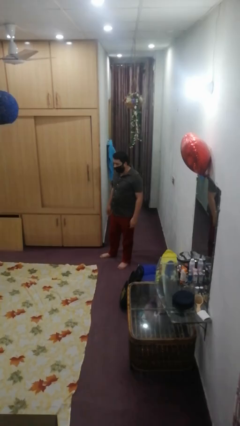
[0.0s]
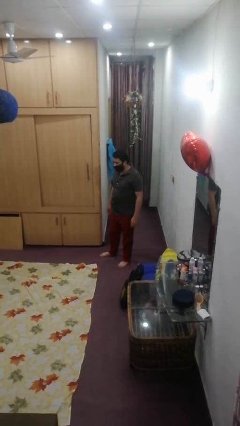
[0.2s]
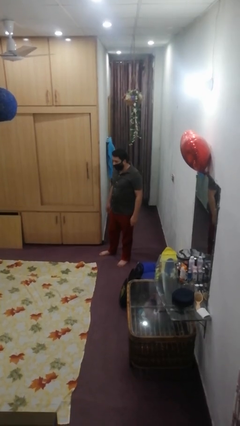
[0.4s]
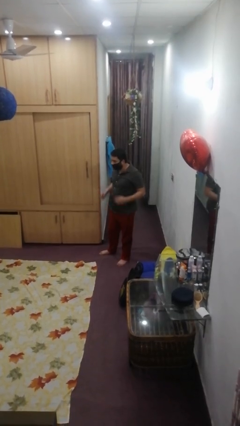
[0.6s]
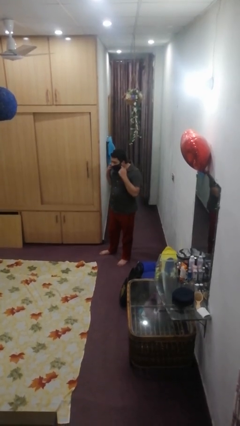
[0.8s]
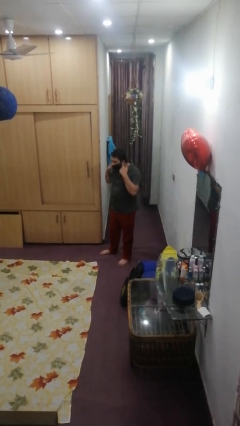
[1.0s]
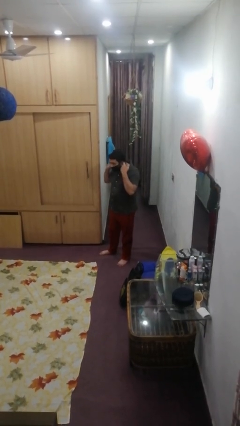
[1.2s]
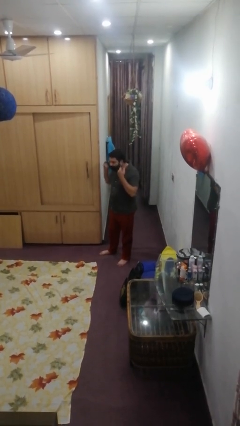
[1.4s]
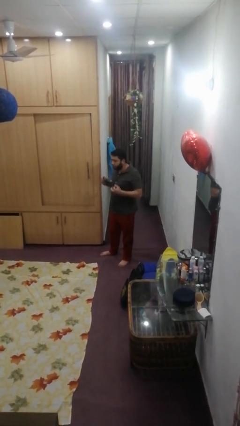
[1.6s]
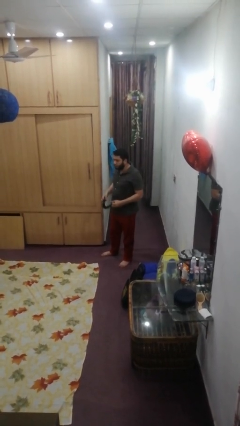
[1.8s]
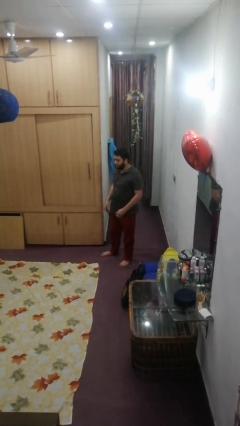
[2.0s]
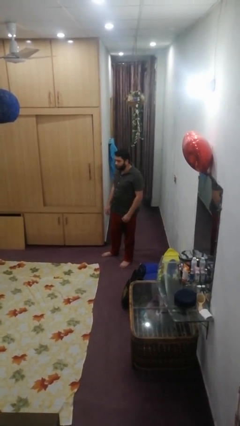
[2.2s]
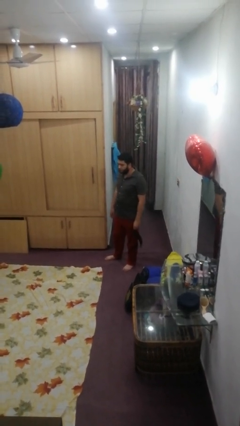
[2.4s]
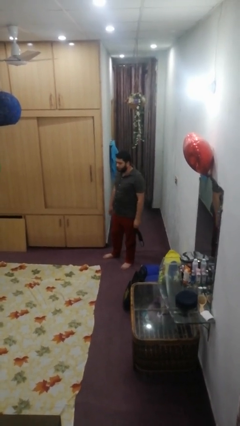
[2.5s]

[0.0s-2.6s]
person takes off facemask

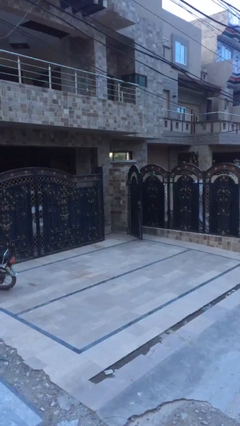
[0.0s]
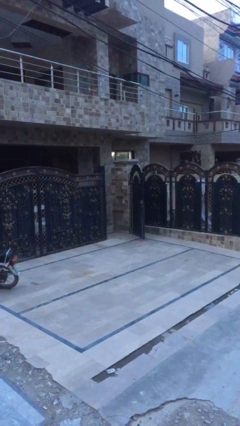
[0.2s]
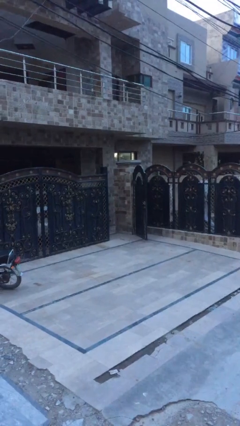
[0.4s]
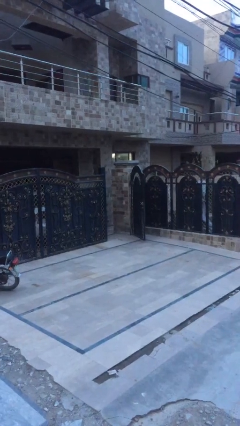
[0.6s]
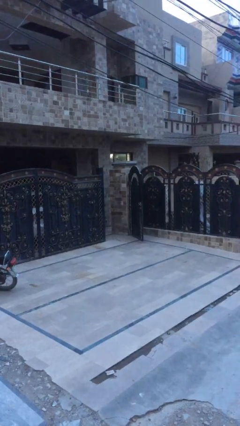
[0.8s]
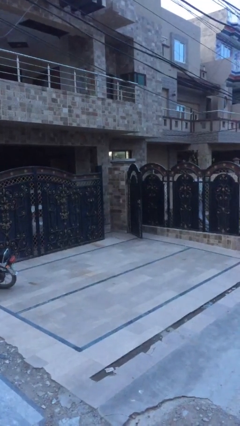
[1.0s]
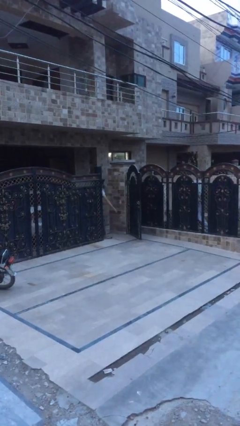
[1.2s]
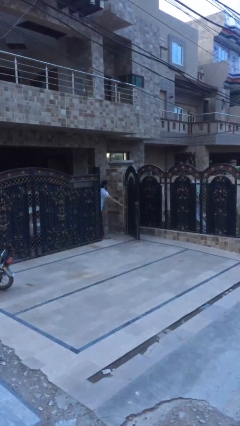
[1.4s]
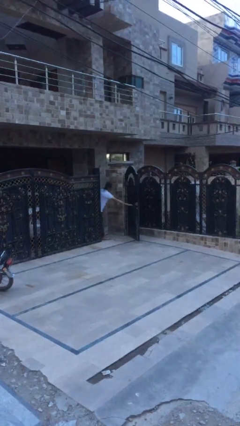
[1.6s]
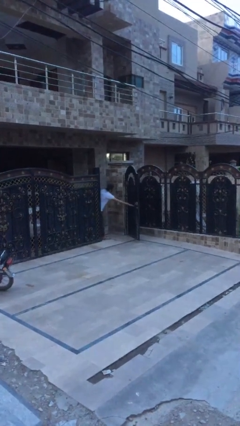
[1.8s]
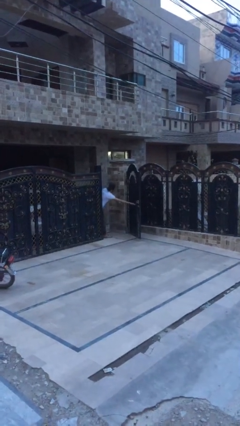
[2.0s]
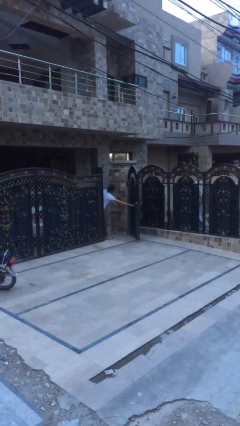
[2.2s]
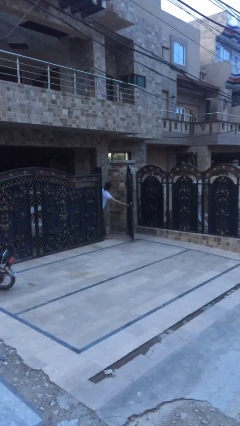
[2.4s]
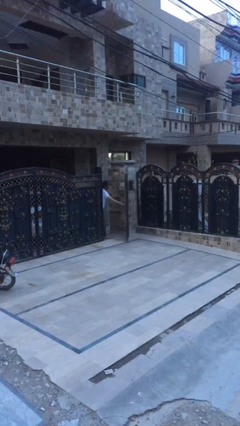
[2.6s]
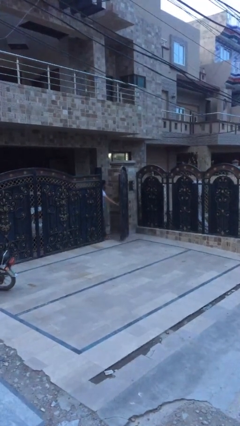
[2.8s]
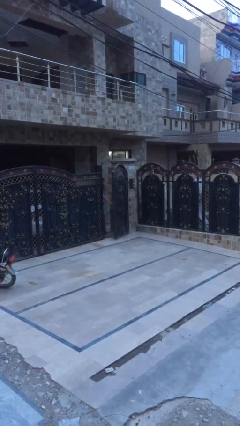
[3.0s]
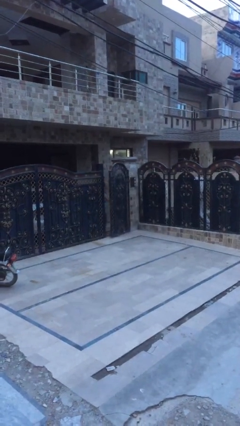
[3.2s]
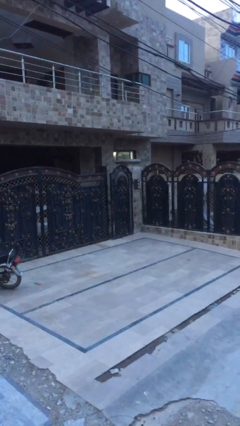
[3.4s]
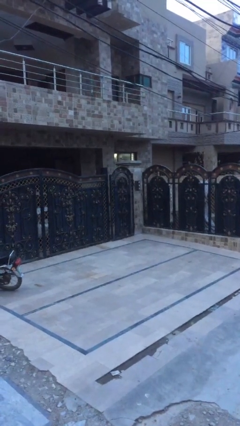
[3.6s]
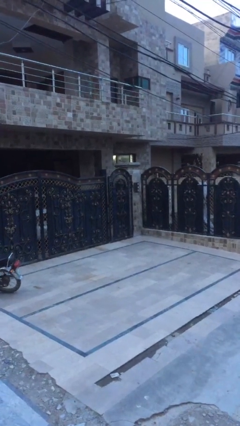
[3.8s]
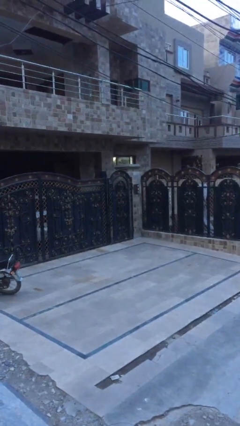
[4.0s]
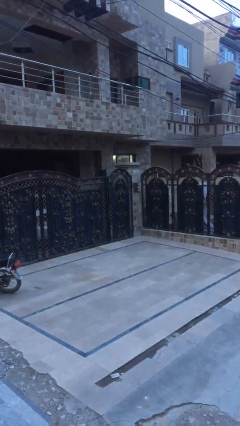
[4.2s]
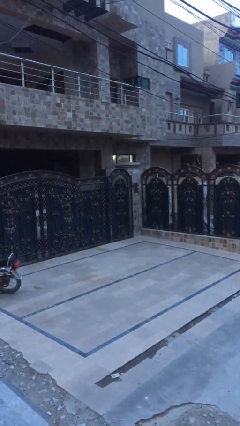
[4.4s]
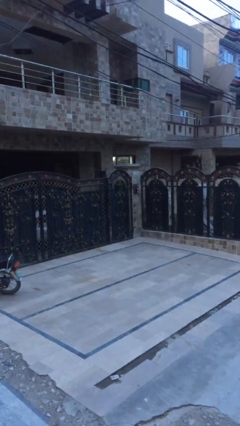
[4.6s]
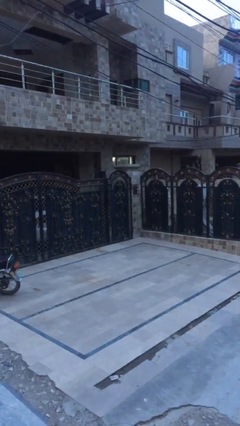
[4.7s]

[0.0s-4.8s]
person closes facility door

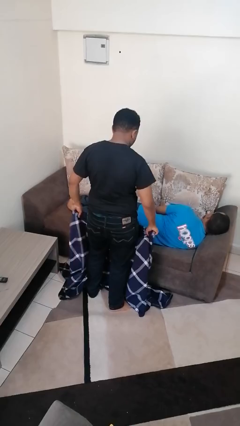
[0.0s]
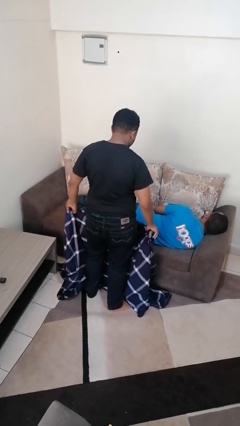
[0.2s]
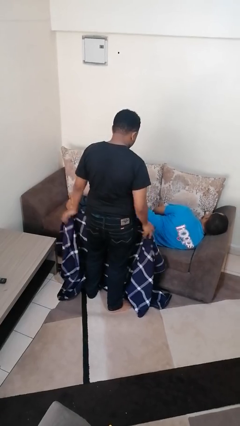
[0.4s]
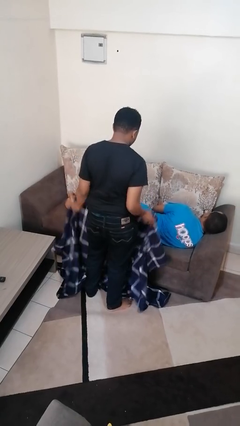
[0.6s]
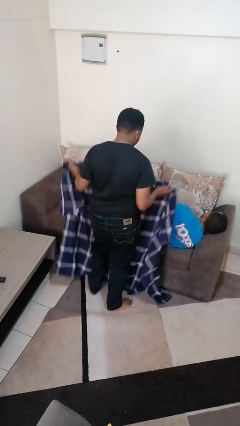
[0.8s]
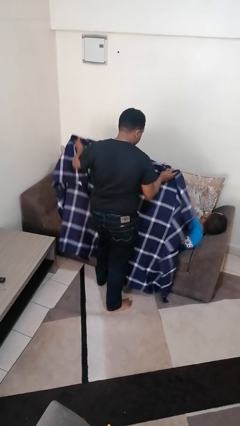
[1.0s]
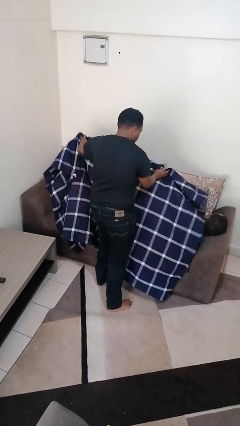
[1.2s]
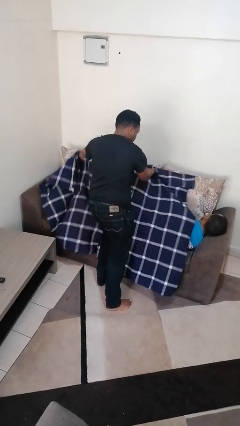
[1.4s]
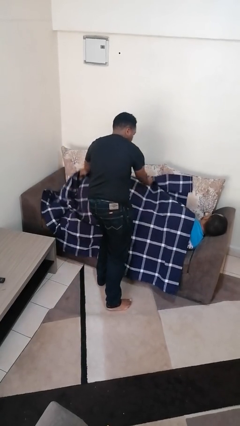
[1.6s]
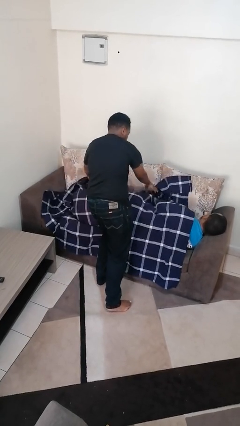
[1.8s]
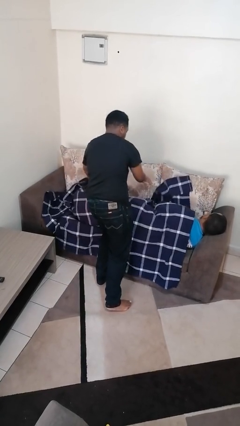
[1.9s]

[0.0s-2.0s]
person covers friend with blanket

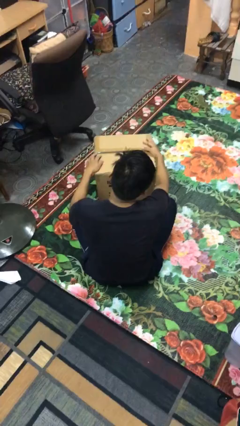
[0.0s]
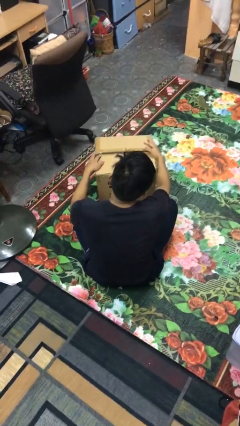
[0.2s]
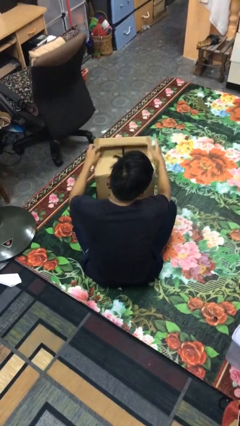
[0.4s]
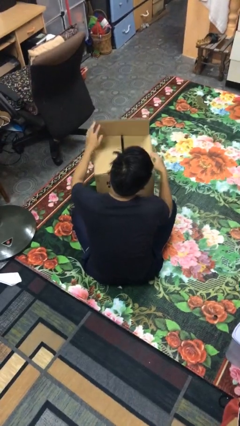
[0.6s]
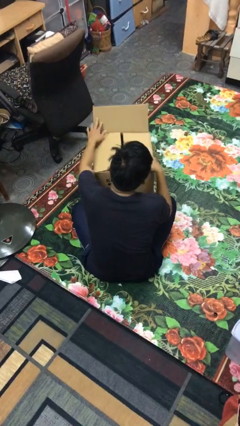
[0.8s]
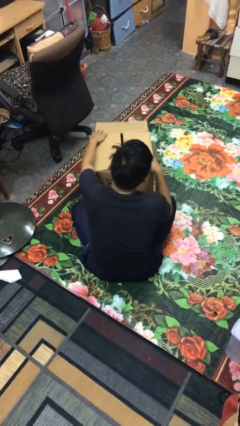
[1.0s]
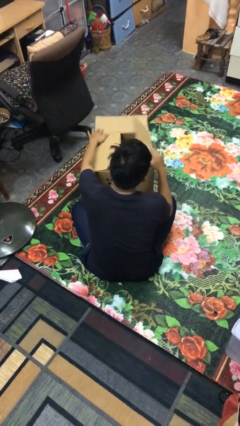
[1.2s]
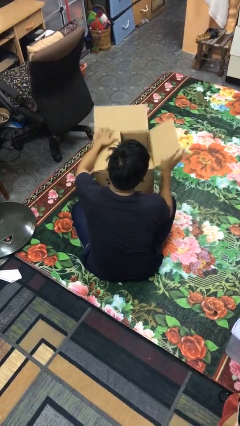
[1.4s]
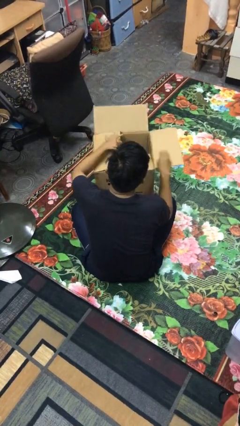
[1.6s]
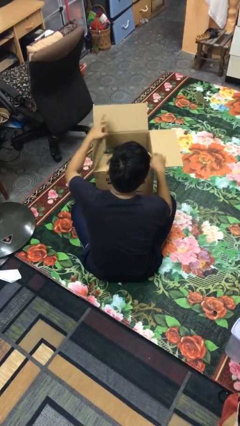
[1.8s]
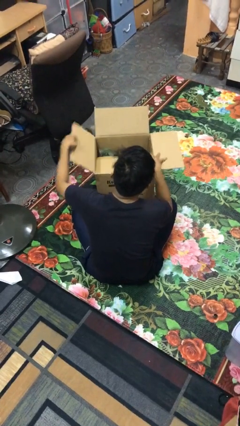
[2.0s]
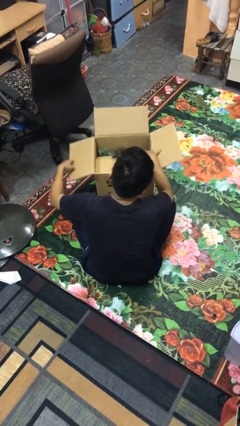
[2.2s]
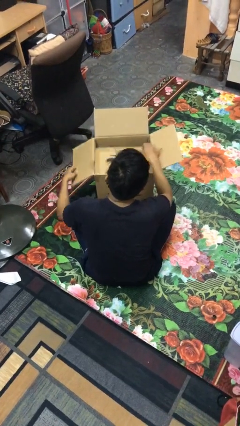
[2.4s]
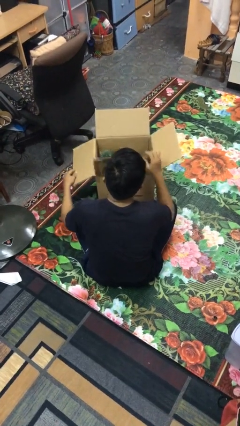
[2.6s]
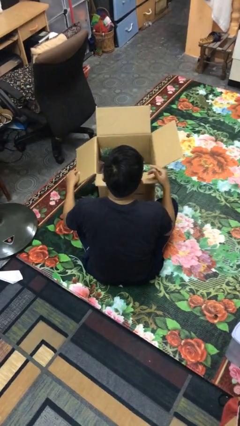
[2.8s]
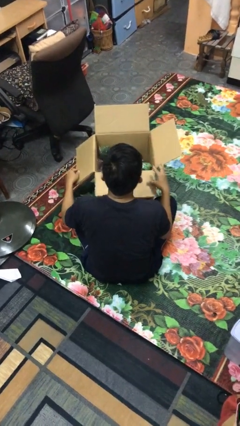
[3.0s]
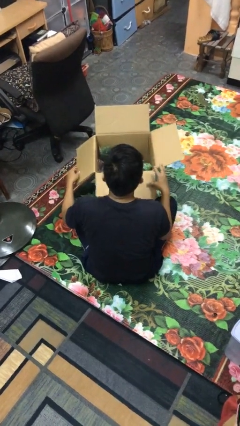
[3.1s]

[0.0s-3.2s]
person opens box

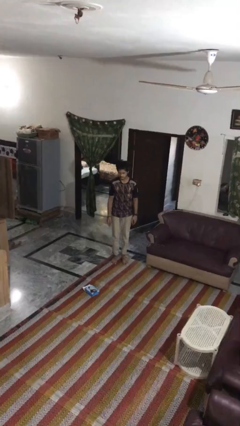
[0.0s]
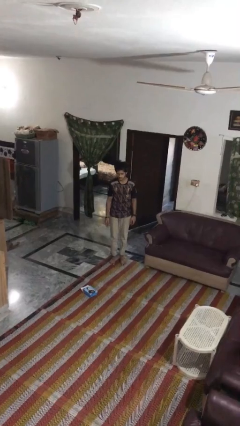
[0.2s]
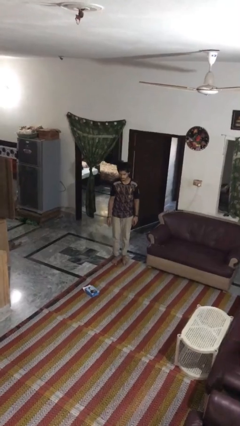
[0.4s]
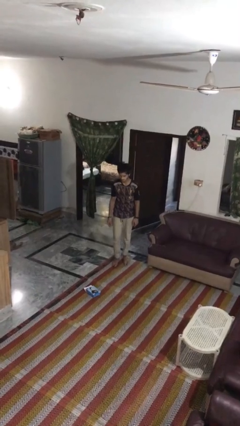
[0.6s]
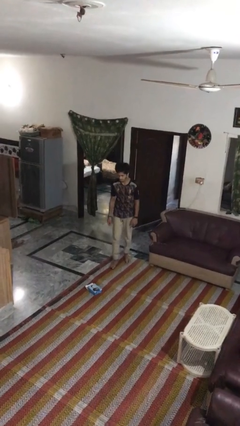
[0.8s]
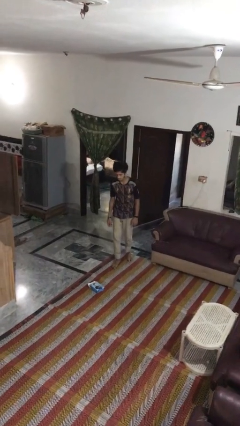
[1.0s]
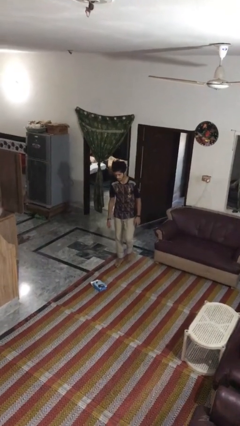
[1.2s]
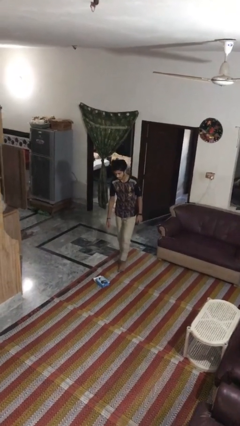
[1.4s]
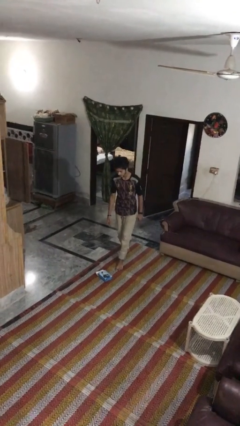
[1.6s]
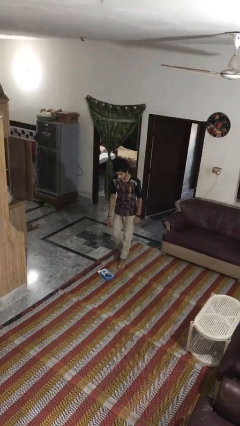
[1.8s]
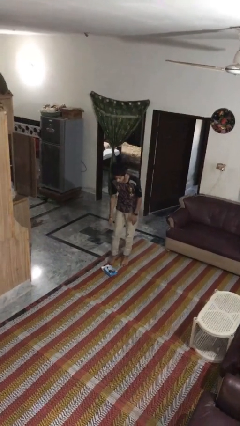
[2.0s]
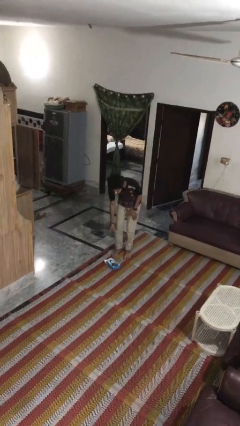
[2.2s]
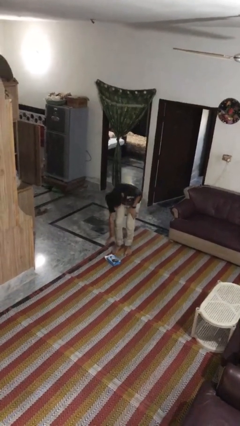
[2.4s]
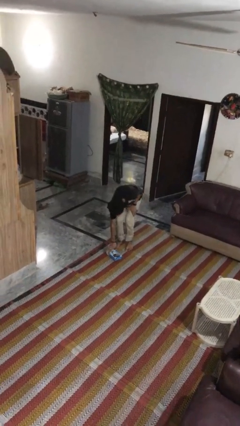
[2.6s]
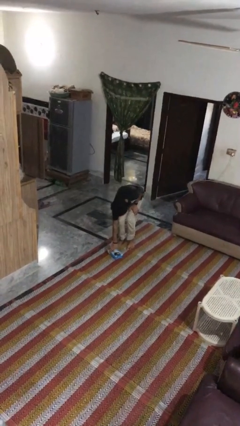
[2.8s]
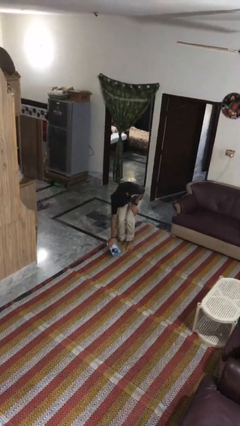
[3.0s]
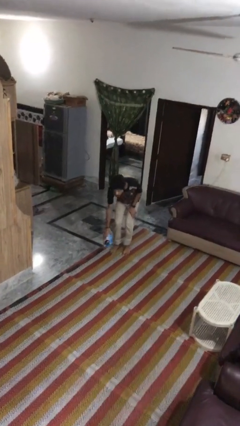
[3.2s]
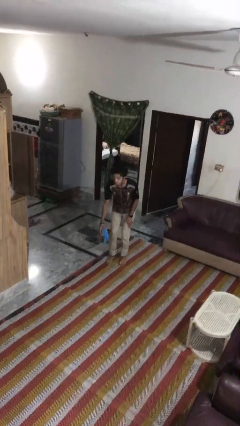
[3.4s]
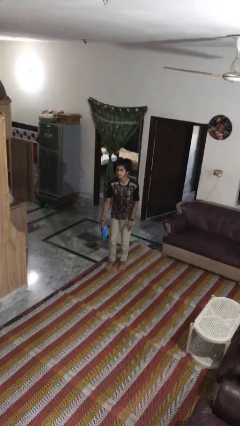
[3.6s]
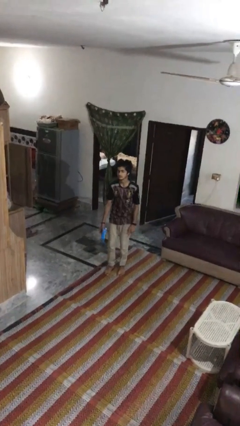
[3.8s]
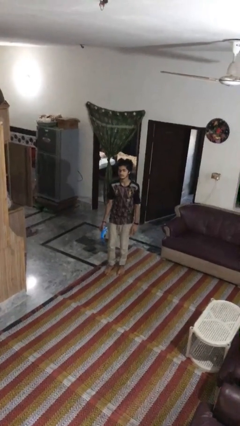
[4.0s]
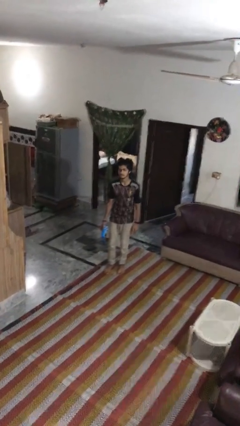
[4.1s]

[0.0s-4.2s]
person picks up object from floor

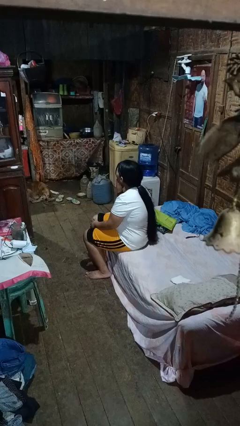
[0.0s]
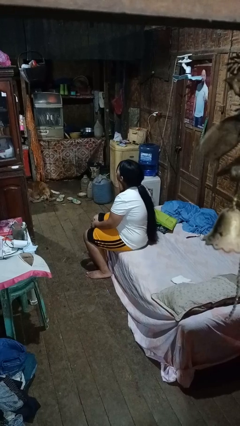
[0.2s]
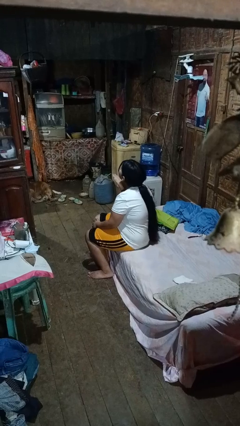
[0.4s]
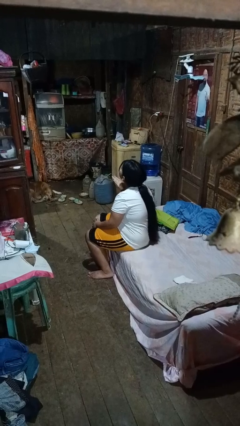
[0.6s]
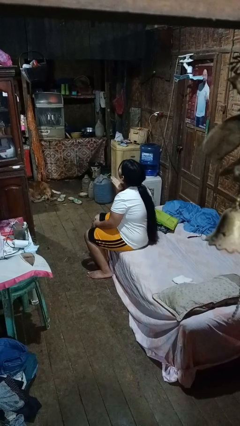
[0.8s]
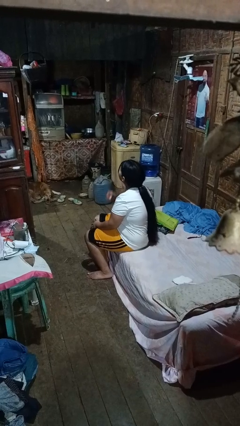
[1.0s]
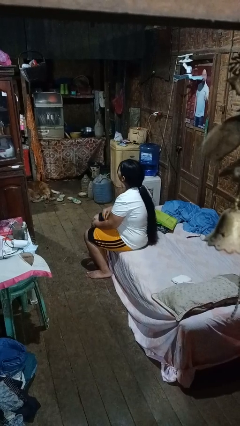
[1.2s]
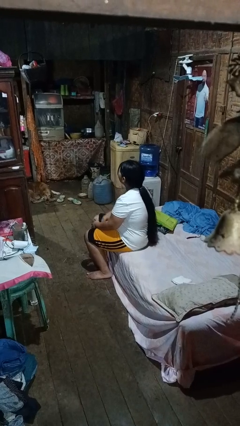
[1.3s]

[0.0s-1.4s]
person gestures blow kiss
